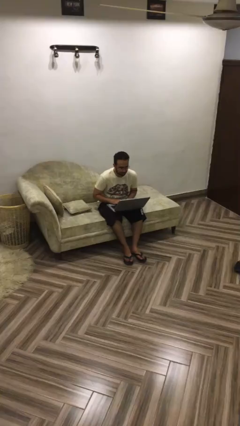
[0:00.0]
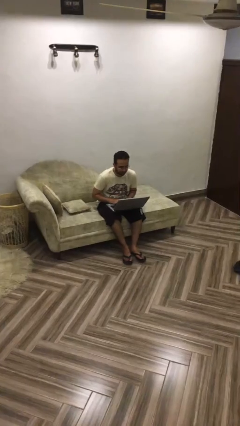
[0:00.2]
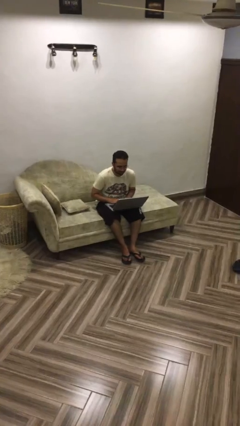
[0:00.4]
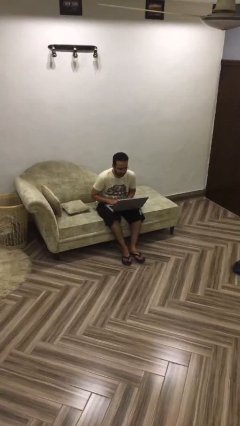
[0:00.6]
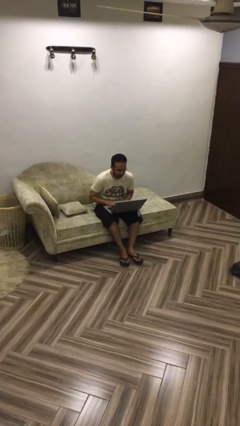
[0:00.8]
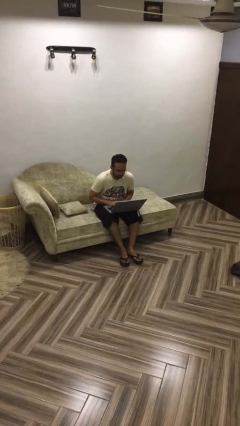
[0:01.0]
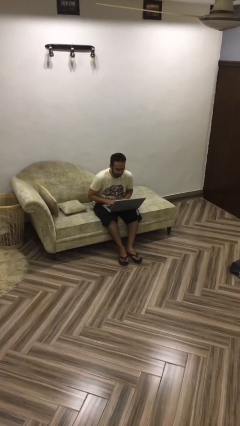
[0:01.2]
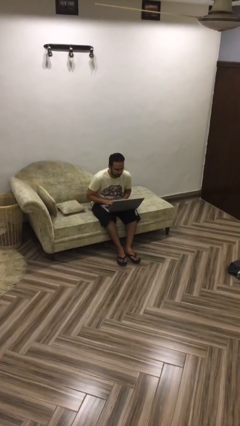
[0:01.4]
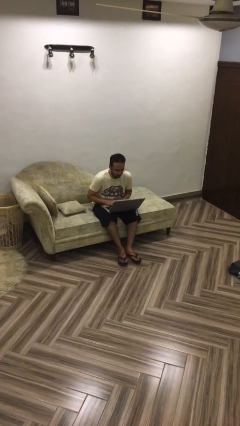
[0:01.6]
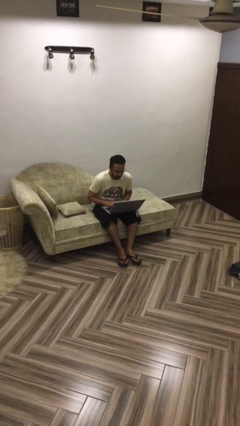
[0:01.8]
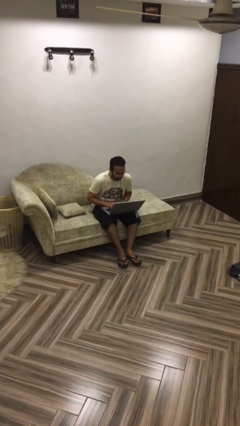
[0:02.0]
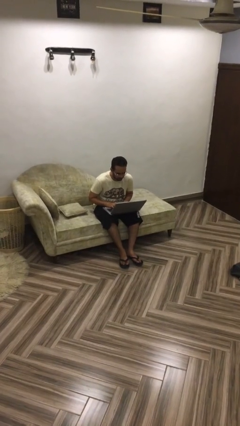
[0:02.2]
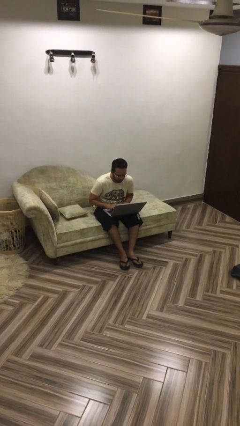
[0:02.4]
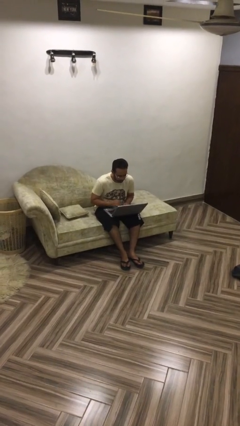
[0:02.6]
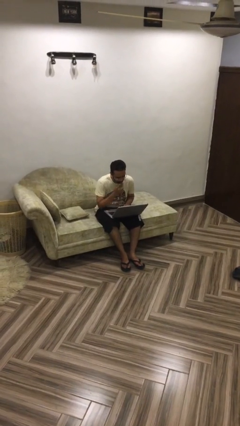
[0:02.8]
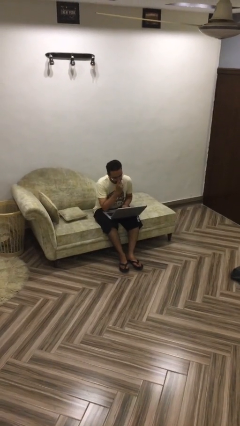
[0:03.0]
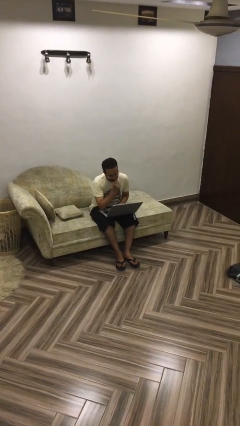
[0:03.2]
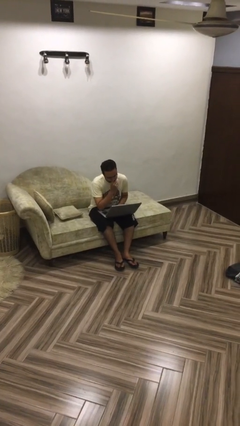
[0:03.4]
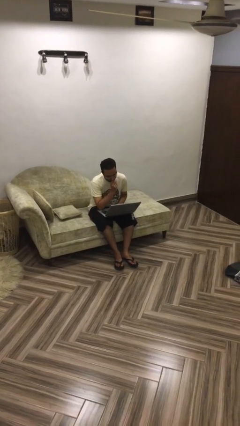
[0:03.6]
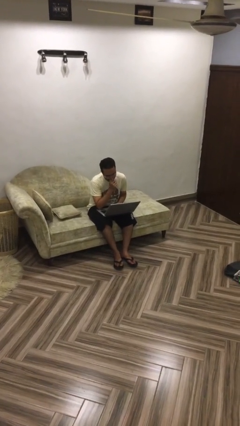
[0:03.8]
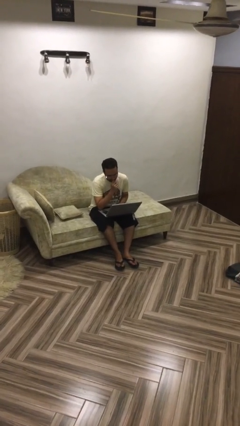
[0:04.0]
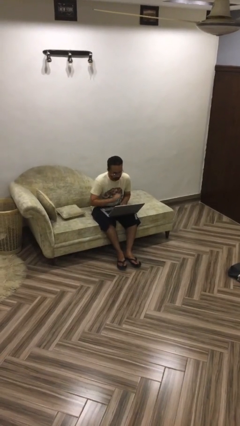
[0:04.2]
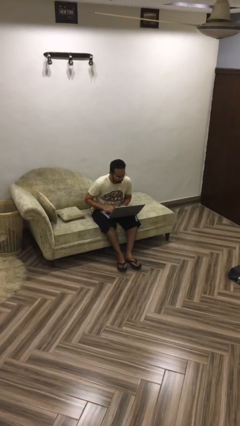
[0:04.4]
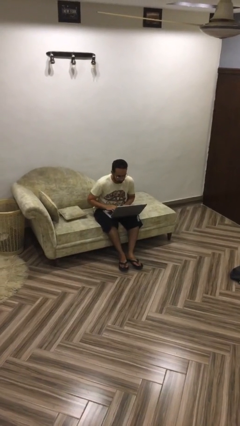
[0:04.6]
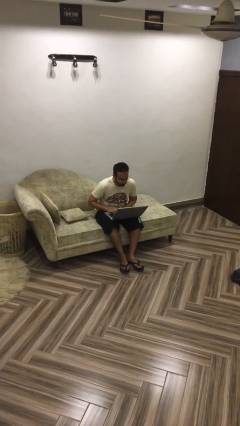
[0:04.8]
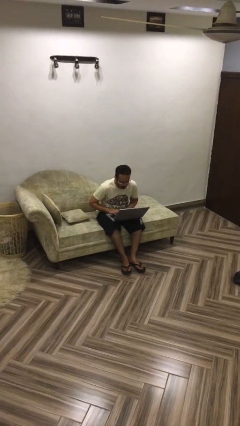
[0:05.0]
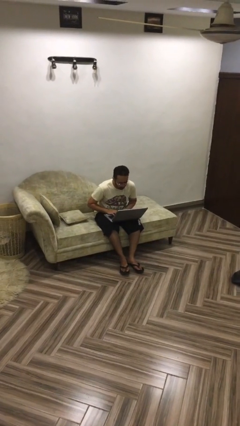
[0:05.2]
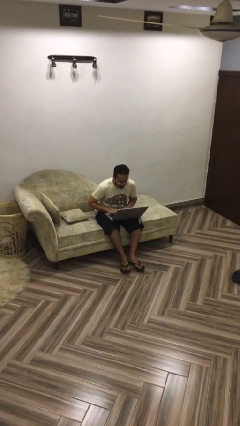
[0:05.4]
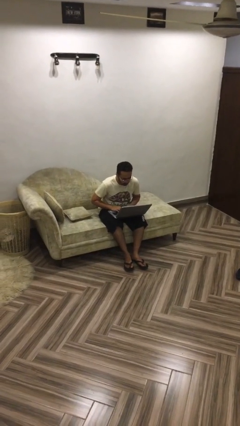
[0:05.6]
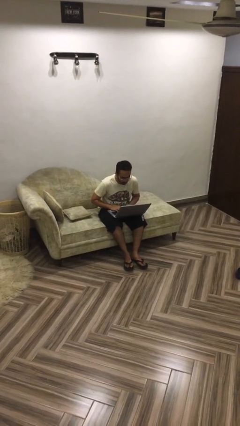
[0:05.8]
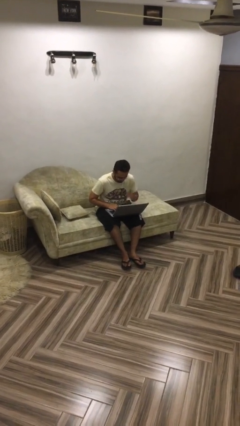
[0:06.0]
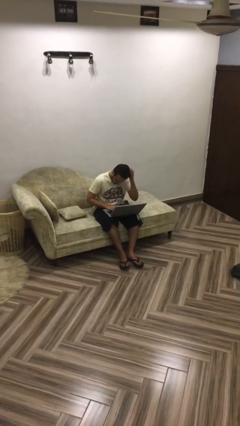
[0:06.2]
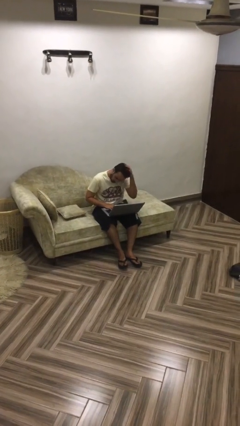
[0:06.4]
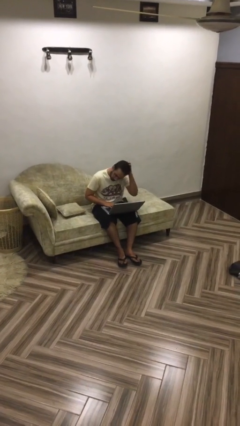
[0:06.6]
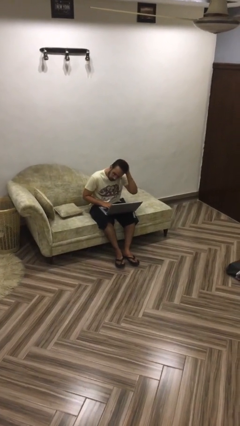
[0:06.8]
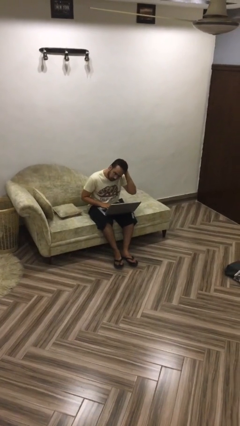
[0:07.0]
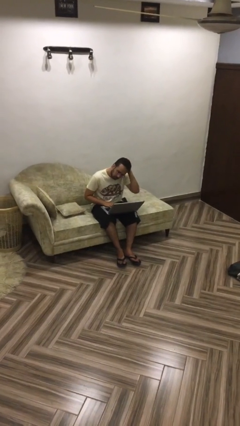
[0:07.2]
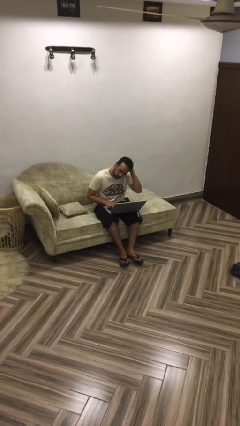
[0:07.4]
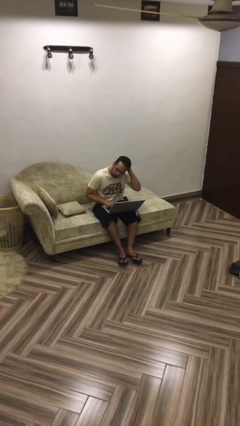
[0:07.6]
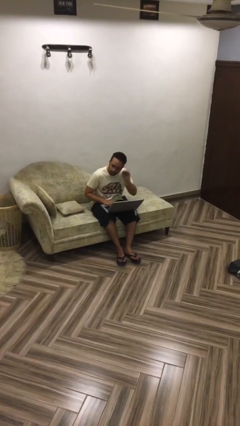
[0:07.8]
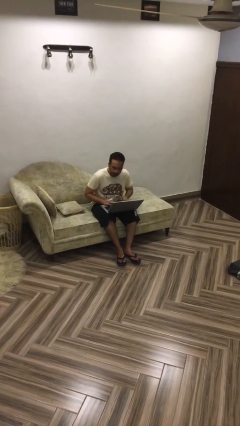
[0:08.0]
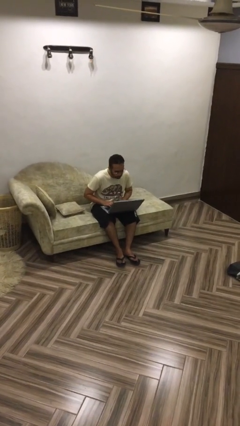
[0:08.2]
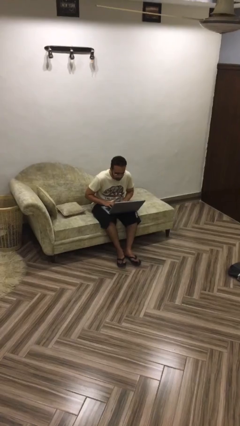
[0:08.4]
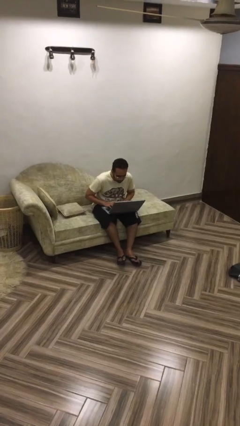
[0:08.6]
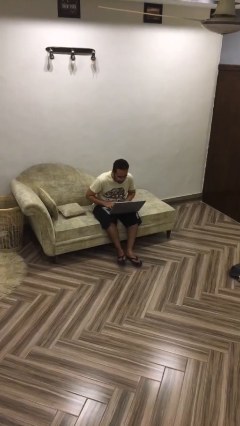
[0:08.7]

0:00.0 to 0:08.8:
person interacts with laptop

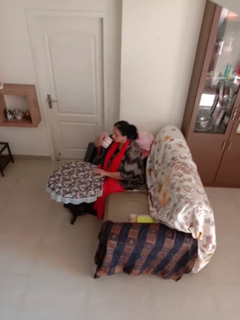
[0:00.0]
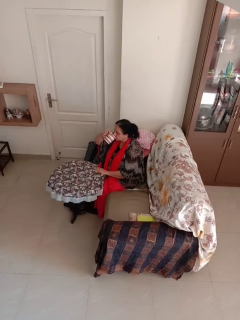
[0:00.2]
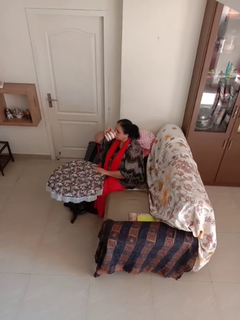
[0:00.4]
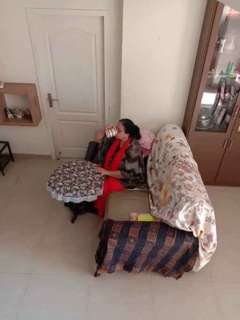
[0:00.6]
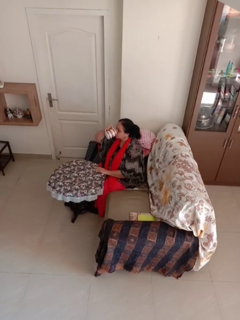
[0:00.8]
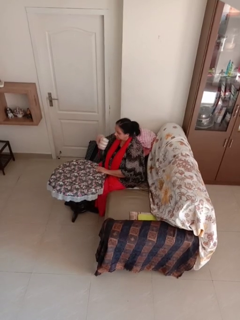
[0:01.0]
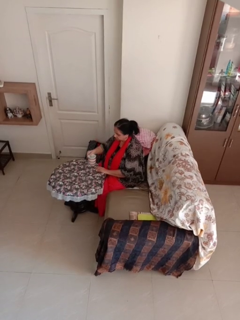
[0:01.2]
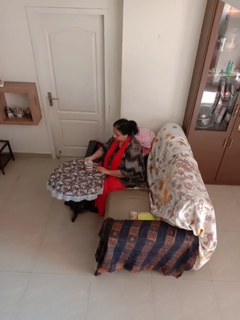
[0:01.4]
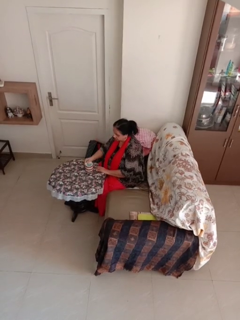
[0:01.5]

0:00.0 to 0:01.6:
person drinks from mug

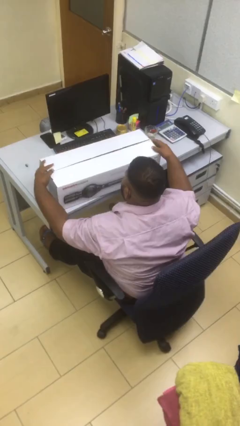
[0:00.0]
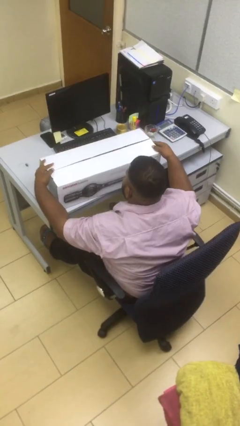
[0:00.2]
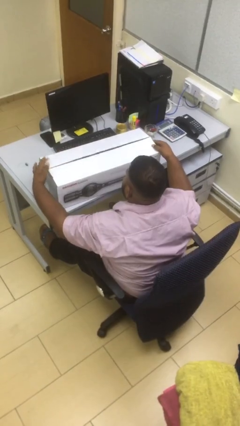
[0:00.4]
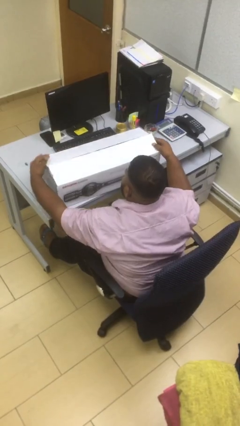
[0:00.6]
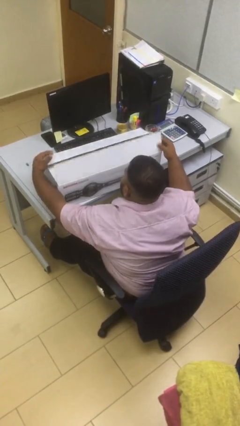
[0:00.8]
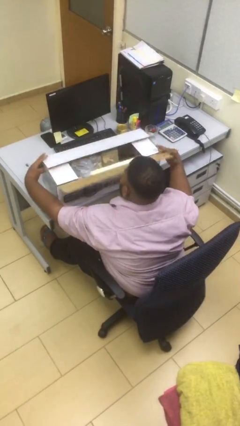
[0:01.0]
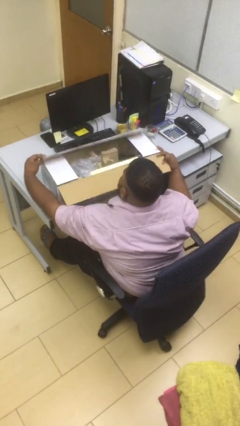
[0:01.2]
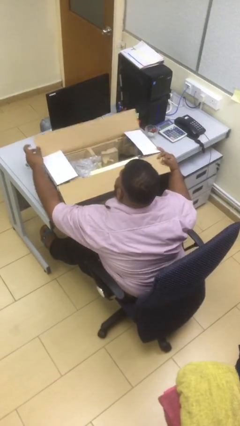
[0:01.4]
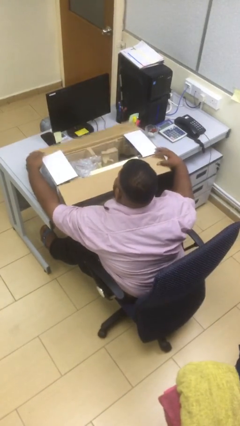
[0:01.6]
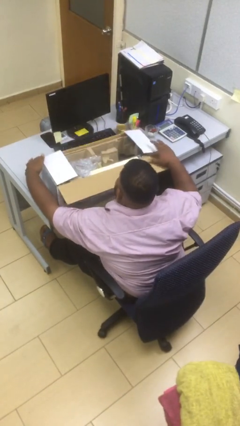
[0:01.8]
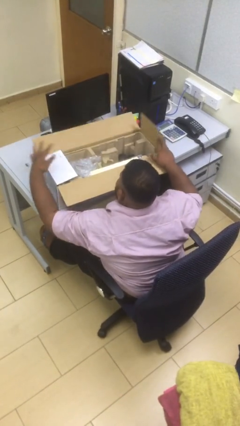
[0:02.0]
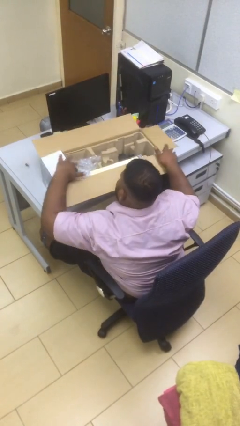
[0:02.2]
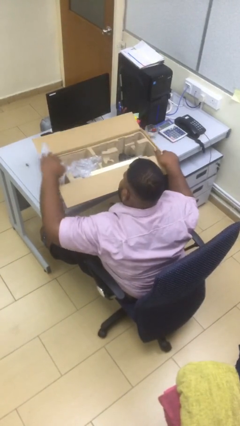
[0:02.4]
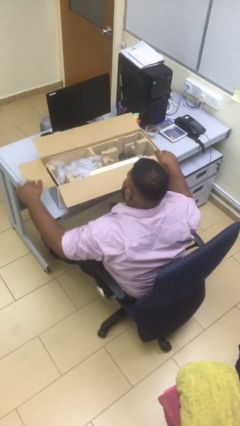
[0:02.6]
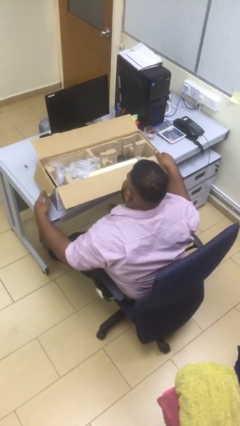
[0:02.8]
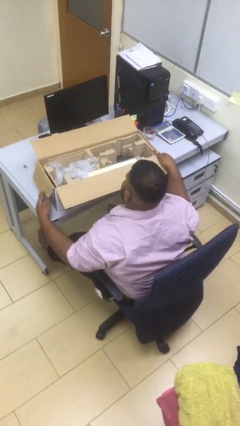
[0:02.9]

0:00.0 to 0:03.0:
person opens box

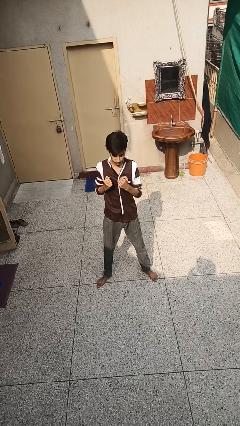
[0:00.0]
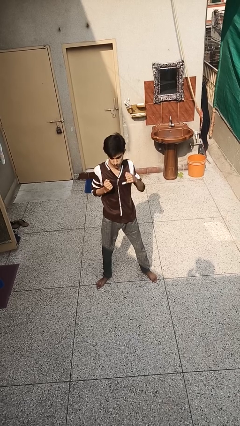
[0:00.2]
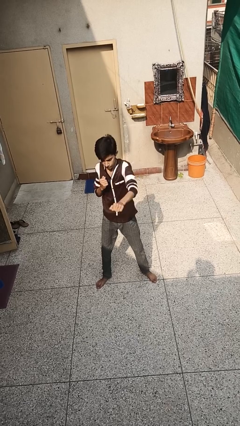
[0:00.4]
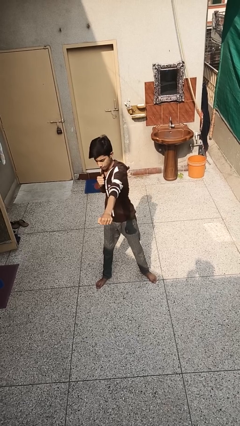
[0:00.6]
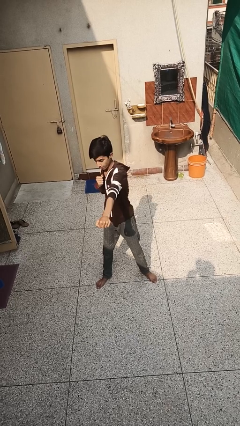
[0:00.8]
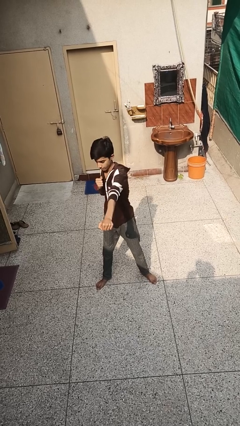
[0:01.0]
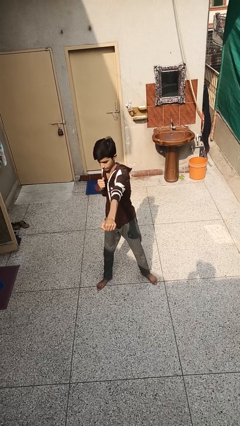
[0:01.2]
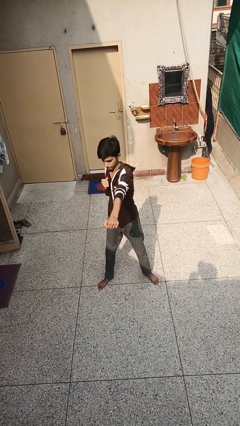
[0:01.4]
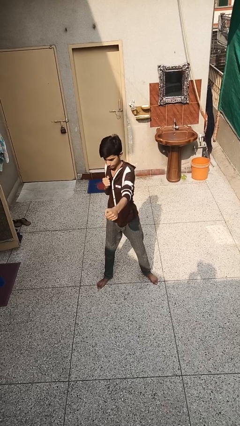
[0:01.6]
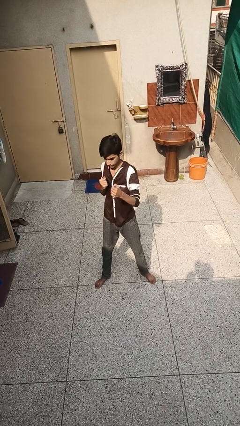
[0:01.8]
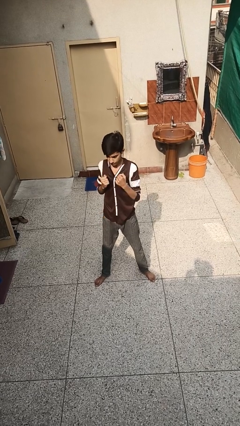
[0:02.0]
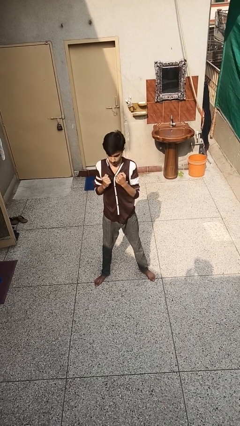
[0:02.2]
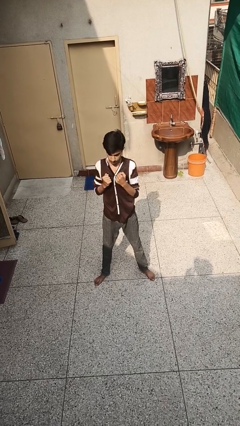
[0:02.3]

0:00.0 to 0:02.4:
person punches

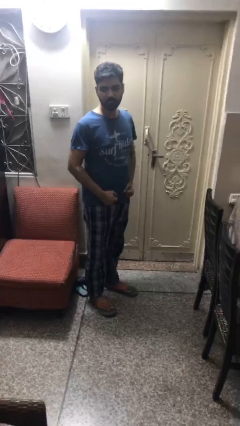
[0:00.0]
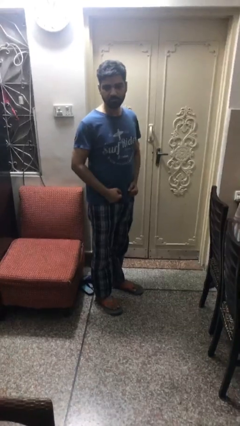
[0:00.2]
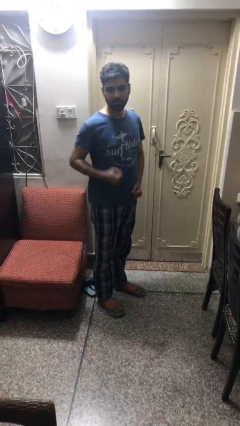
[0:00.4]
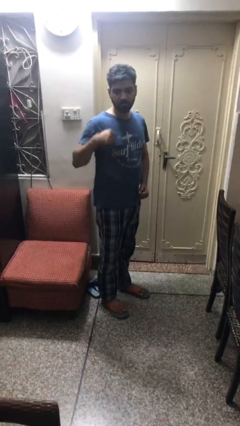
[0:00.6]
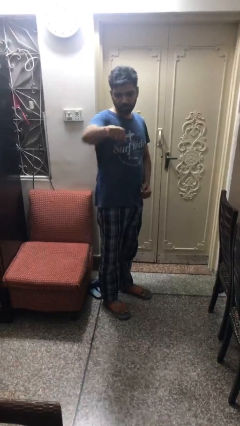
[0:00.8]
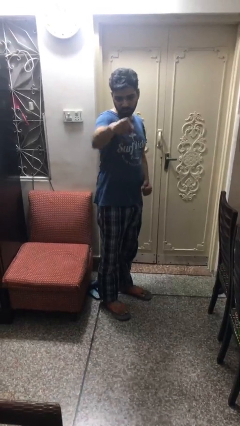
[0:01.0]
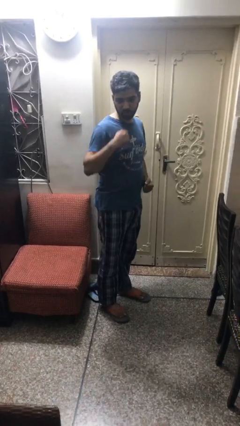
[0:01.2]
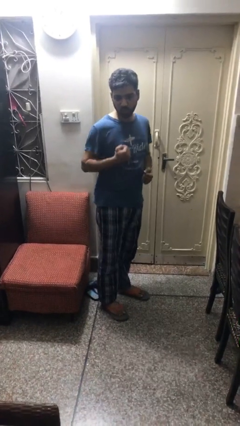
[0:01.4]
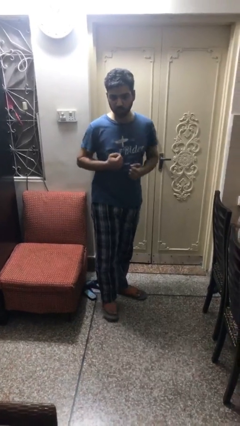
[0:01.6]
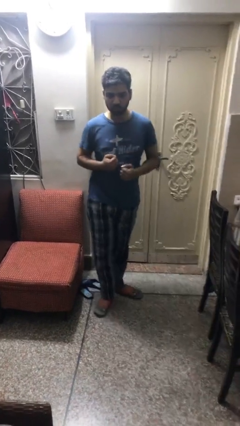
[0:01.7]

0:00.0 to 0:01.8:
person karate chop

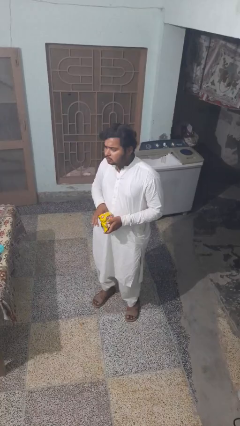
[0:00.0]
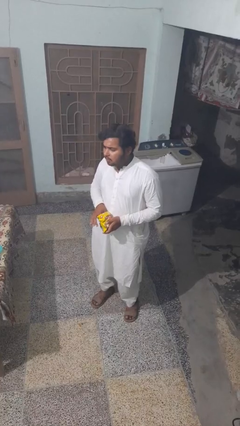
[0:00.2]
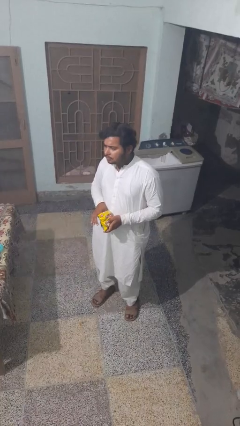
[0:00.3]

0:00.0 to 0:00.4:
person eats snack from bag

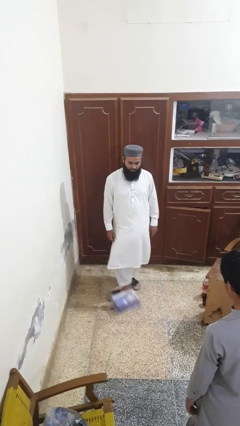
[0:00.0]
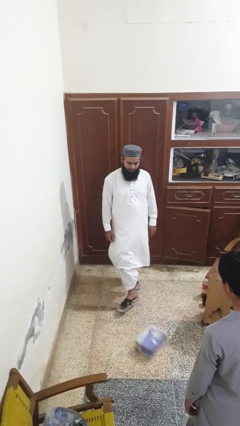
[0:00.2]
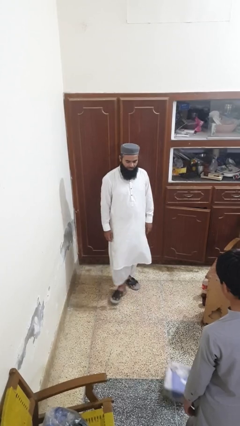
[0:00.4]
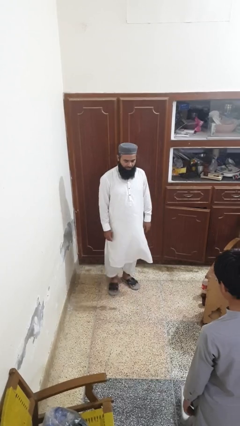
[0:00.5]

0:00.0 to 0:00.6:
person kicks object to person
